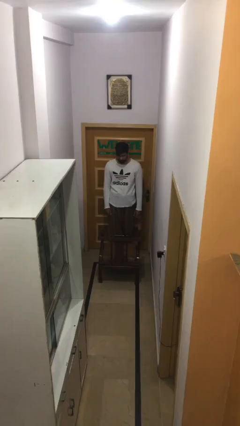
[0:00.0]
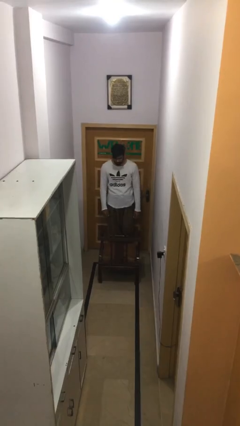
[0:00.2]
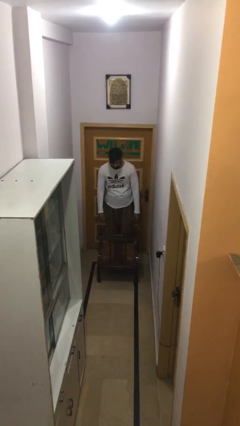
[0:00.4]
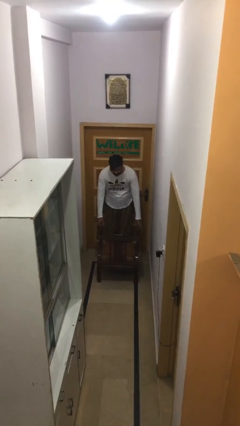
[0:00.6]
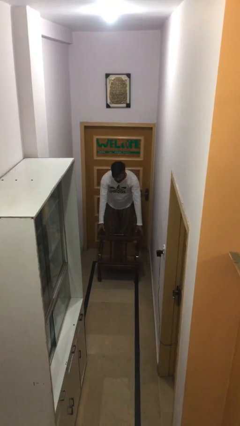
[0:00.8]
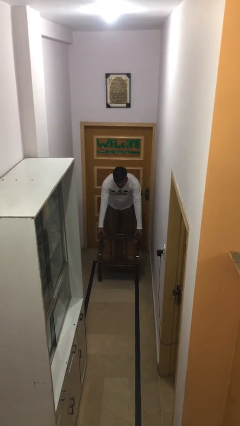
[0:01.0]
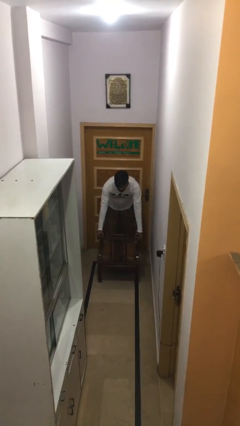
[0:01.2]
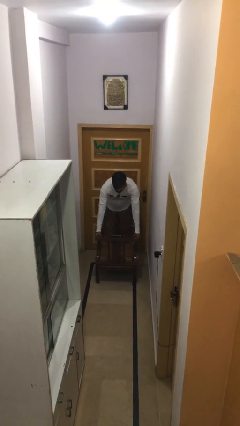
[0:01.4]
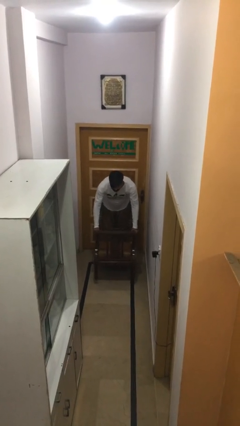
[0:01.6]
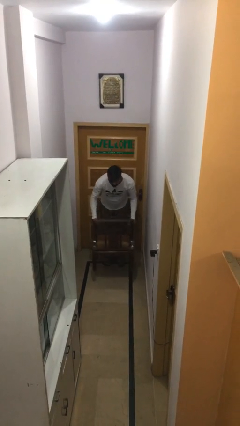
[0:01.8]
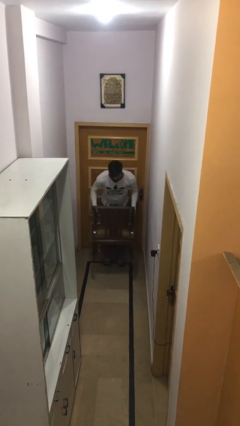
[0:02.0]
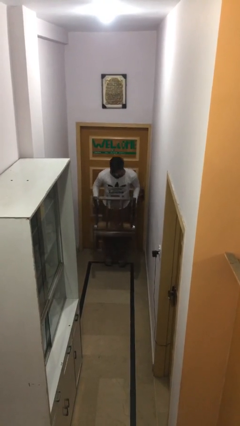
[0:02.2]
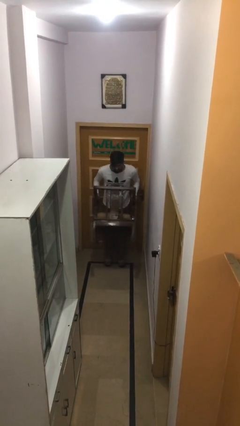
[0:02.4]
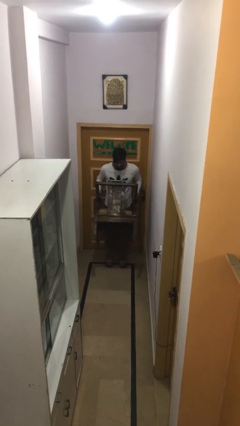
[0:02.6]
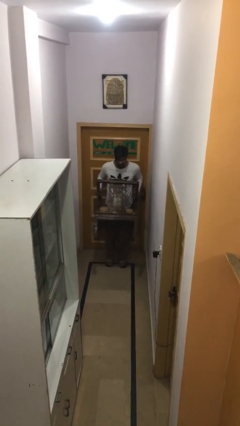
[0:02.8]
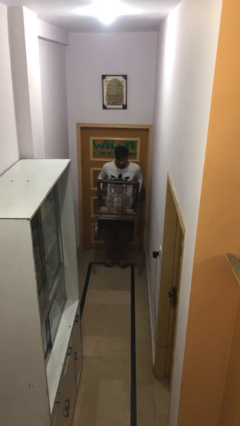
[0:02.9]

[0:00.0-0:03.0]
person picks up object from floor

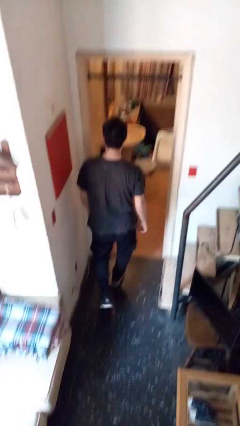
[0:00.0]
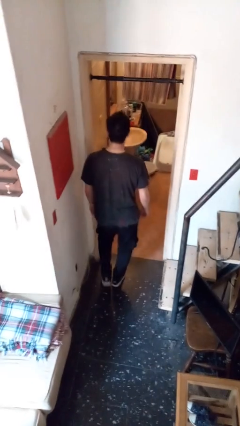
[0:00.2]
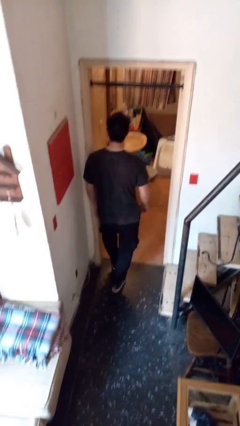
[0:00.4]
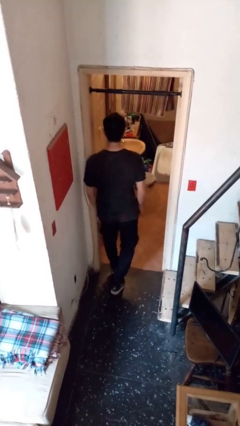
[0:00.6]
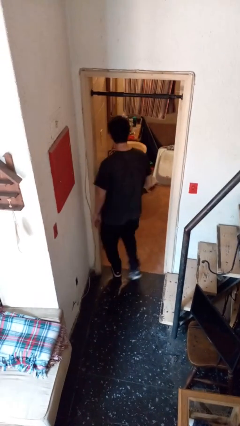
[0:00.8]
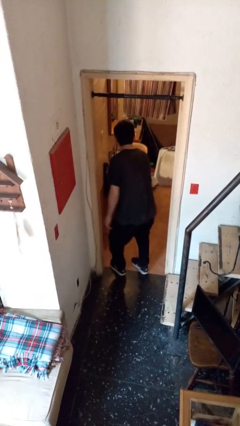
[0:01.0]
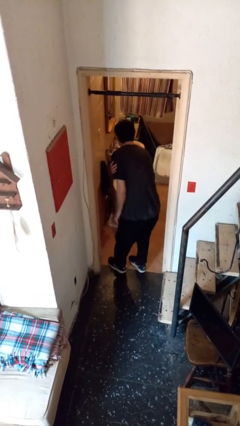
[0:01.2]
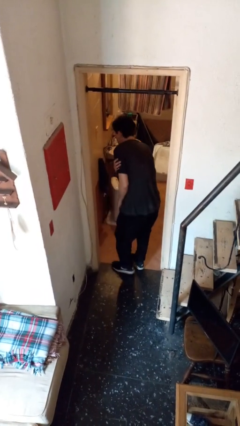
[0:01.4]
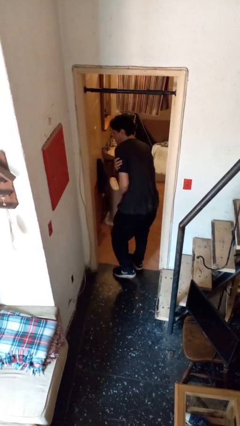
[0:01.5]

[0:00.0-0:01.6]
person bumps into wall

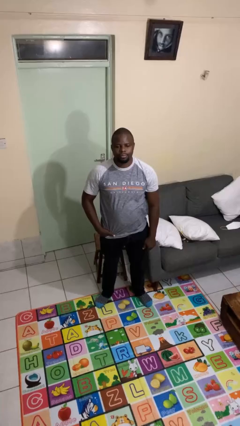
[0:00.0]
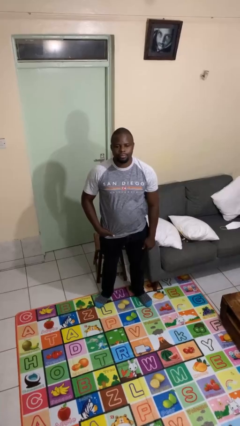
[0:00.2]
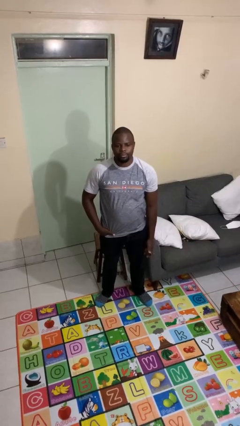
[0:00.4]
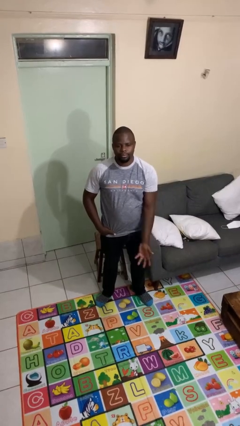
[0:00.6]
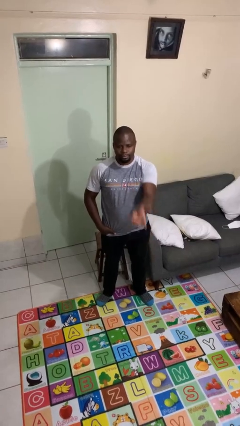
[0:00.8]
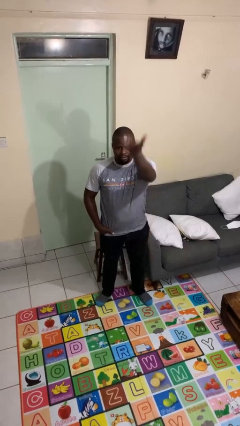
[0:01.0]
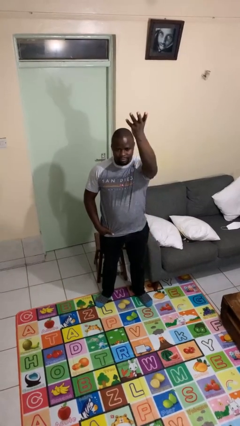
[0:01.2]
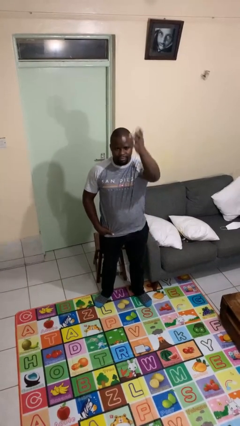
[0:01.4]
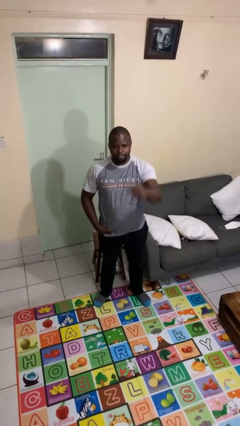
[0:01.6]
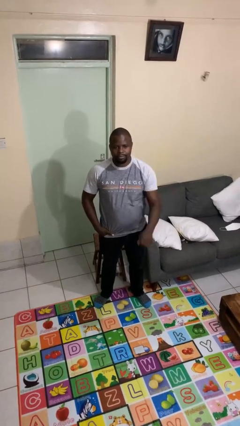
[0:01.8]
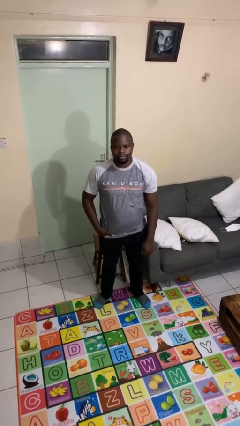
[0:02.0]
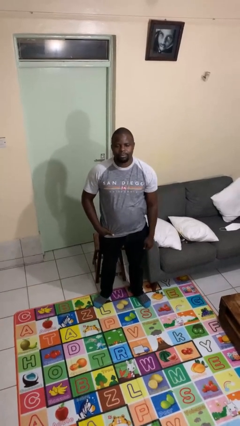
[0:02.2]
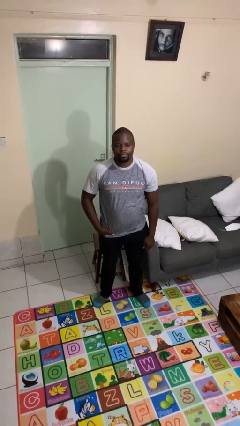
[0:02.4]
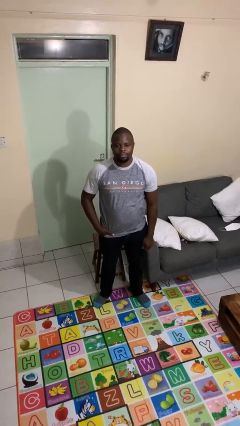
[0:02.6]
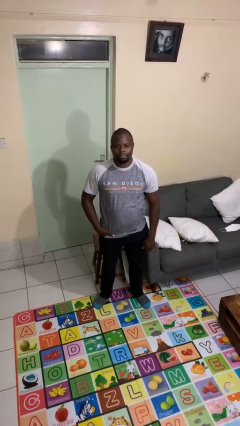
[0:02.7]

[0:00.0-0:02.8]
person gestures swipe up

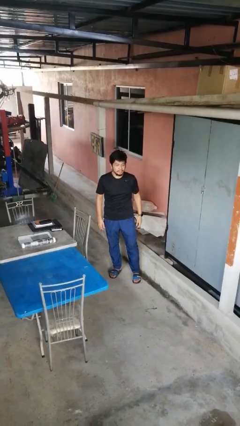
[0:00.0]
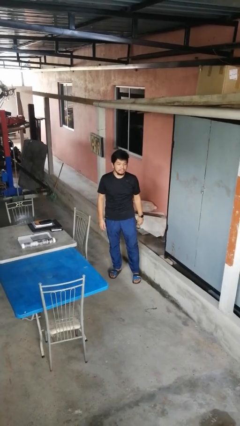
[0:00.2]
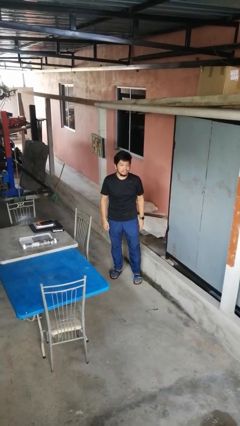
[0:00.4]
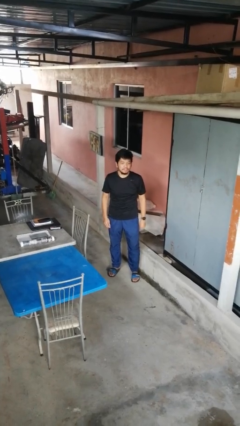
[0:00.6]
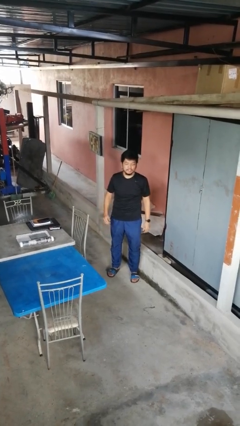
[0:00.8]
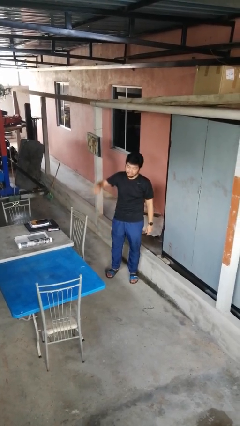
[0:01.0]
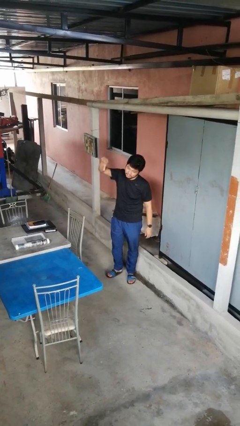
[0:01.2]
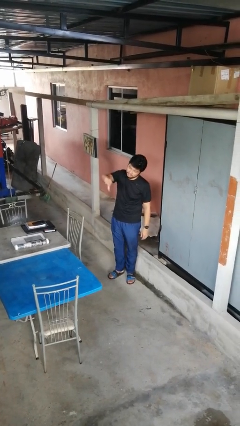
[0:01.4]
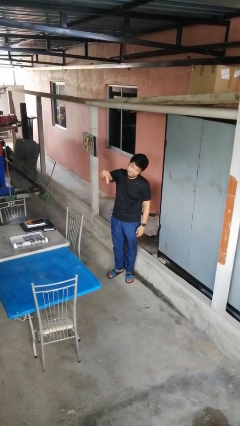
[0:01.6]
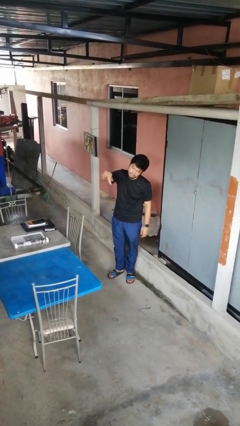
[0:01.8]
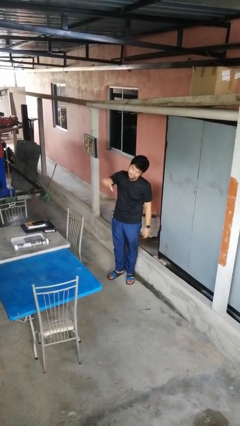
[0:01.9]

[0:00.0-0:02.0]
person opens gate

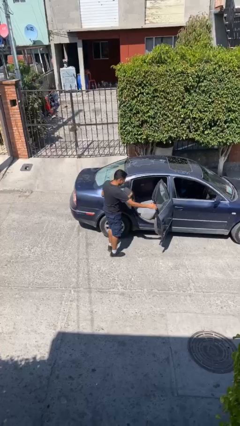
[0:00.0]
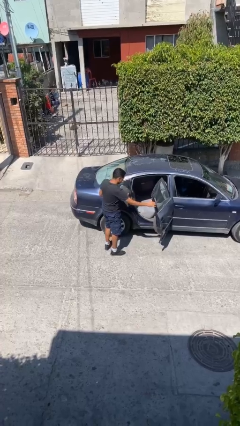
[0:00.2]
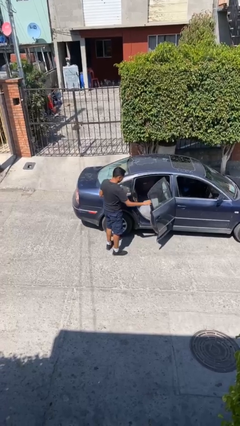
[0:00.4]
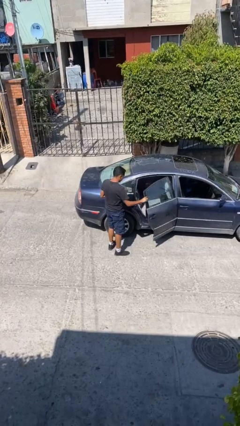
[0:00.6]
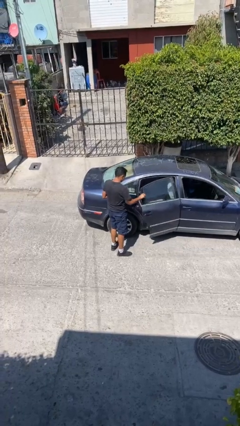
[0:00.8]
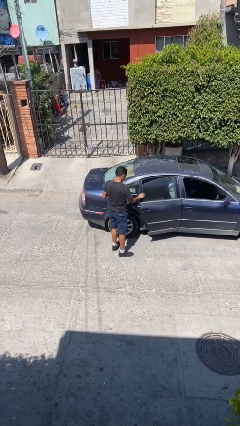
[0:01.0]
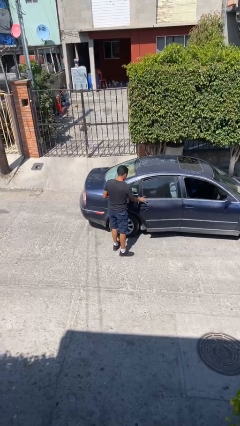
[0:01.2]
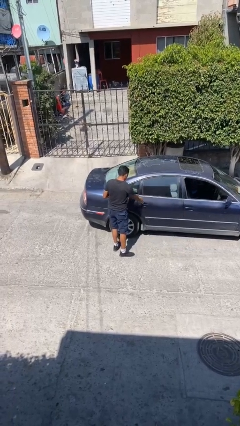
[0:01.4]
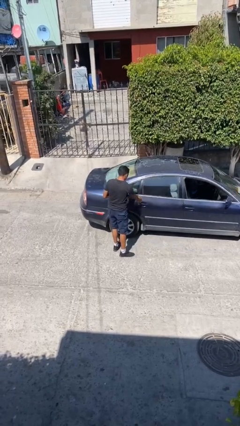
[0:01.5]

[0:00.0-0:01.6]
person closes car door

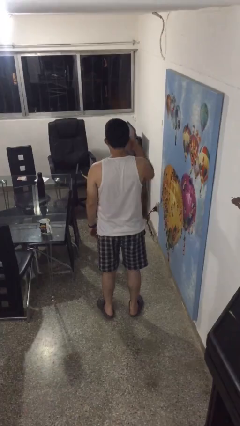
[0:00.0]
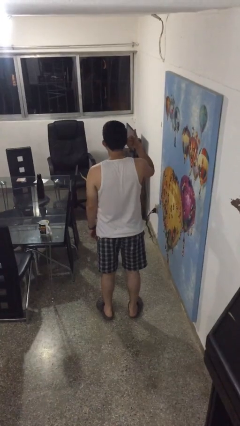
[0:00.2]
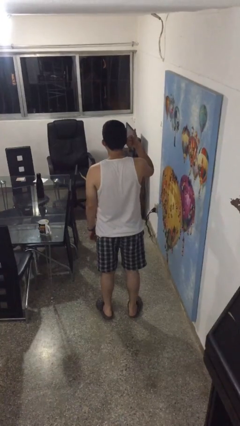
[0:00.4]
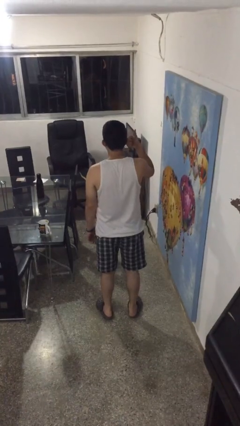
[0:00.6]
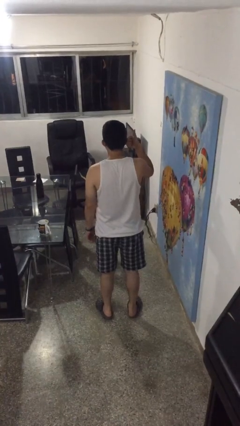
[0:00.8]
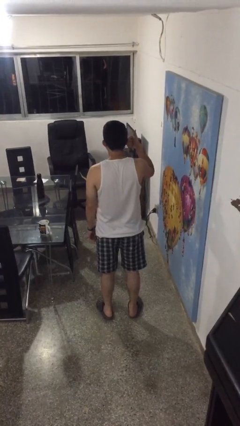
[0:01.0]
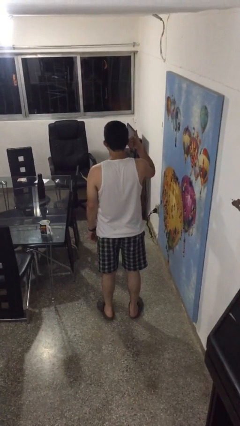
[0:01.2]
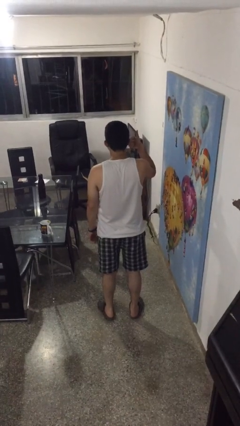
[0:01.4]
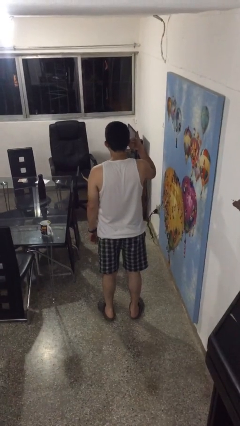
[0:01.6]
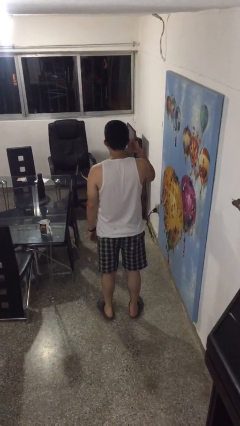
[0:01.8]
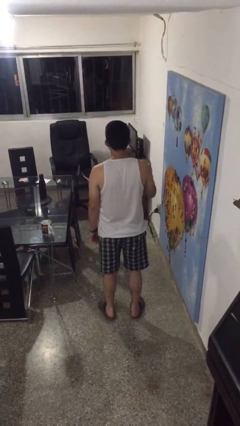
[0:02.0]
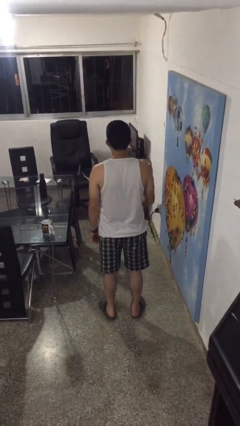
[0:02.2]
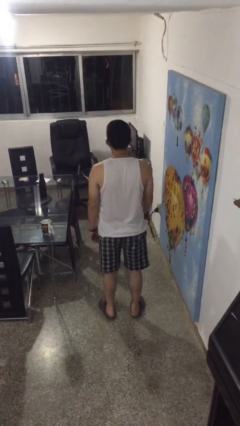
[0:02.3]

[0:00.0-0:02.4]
person gestures thumbs up

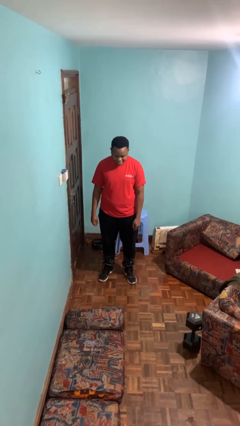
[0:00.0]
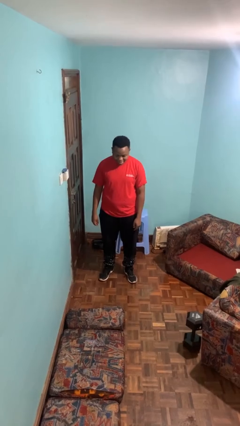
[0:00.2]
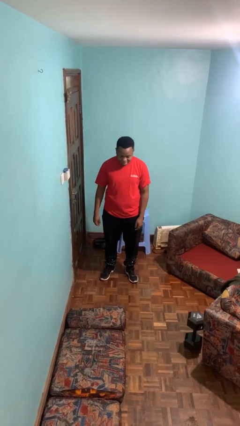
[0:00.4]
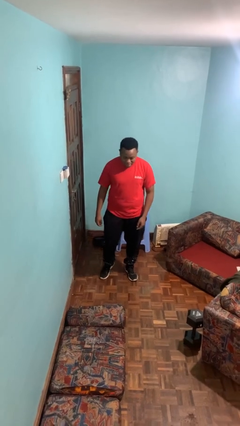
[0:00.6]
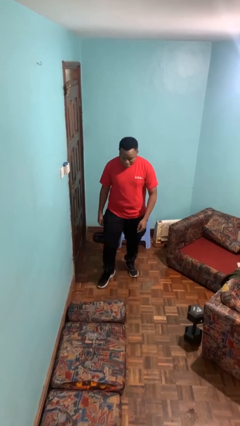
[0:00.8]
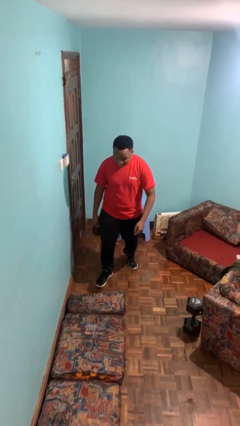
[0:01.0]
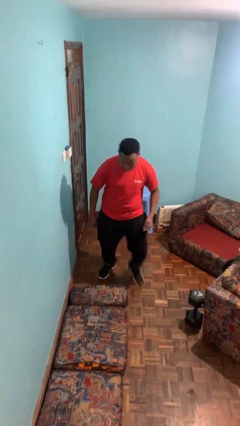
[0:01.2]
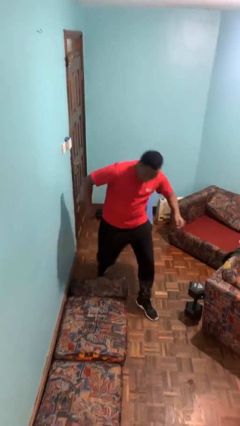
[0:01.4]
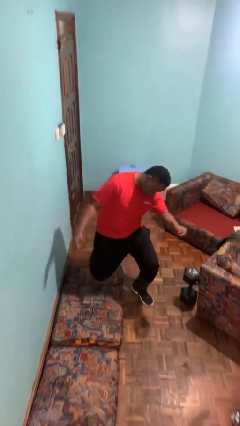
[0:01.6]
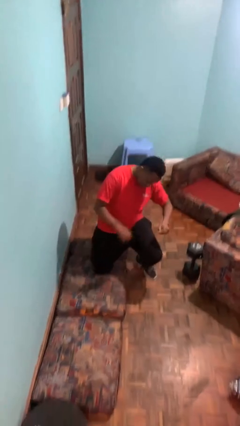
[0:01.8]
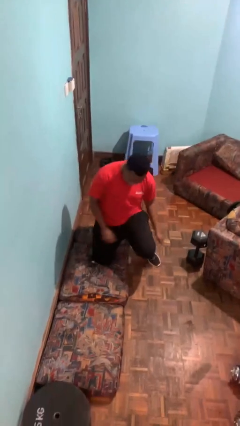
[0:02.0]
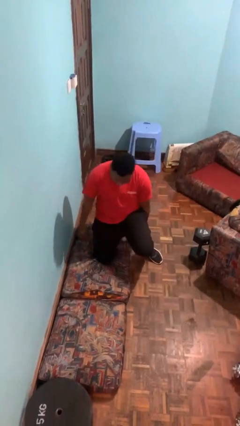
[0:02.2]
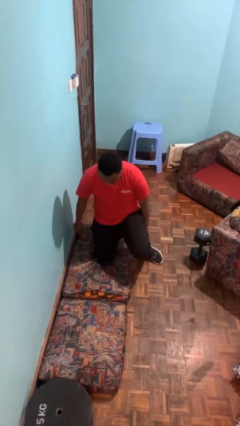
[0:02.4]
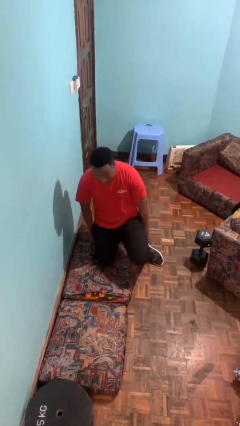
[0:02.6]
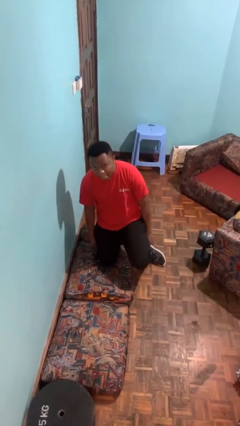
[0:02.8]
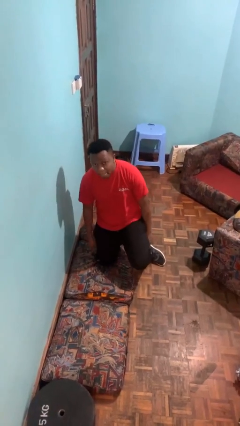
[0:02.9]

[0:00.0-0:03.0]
person trips on object on floor

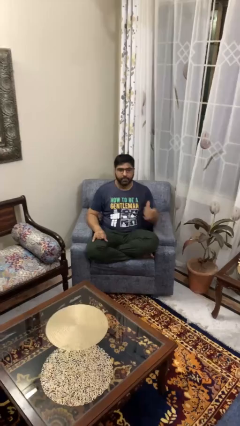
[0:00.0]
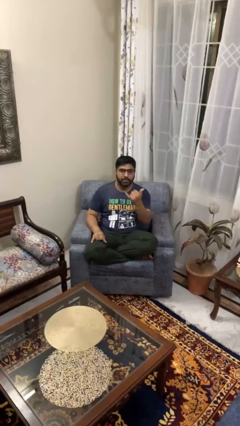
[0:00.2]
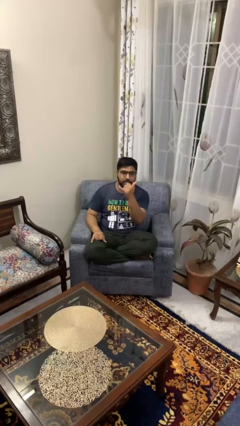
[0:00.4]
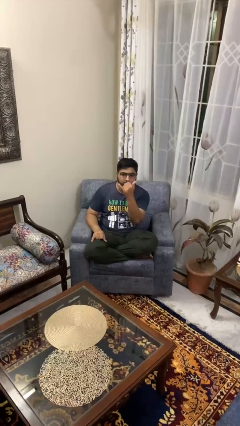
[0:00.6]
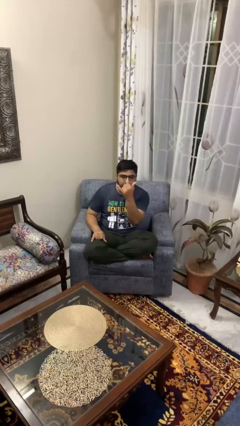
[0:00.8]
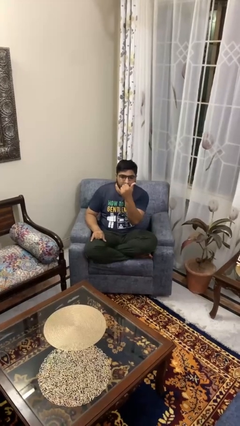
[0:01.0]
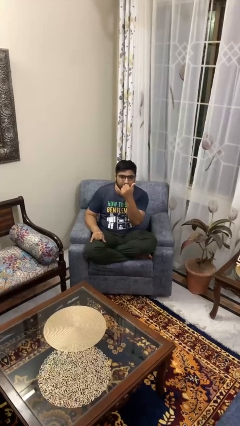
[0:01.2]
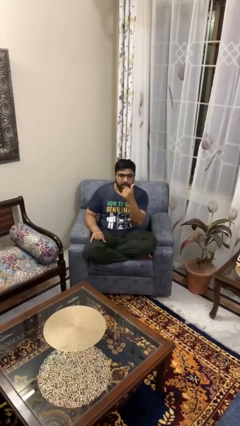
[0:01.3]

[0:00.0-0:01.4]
person gestures hang loose
